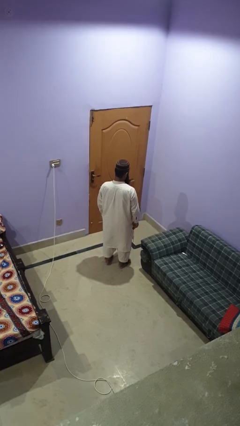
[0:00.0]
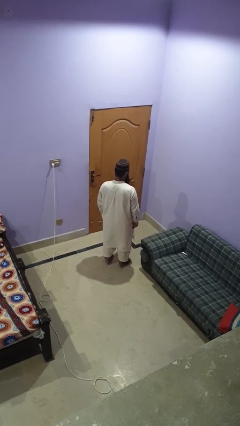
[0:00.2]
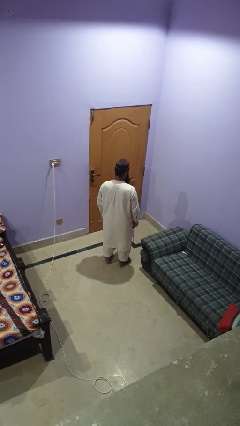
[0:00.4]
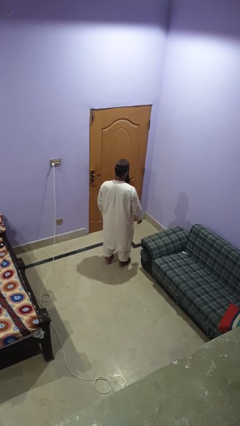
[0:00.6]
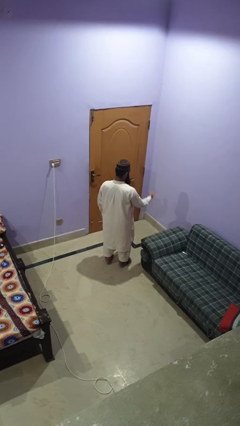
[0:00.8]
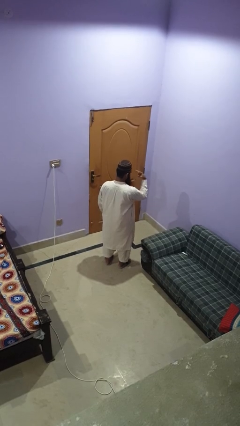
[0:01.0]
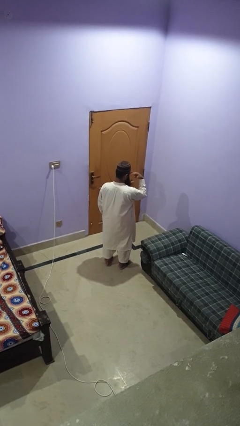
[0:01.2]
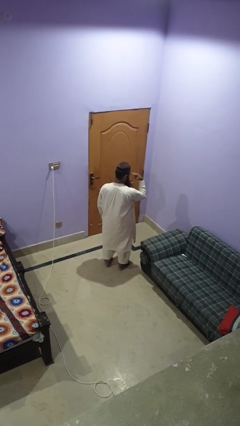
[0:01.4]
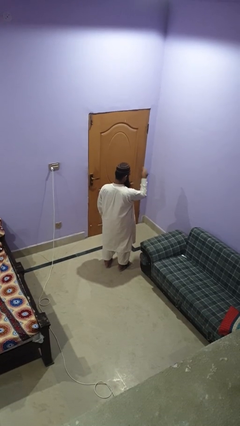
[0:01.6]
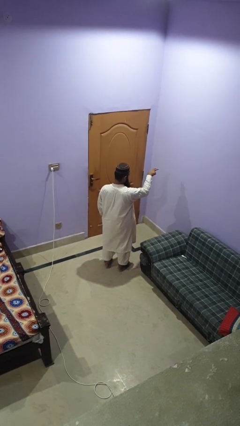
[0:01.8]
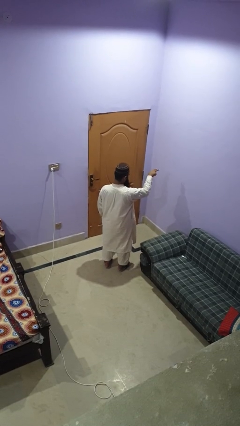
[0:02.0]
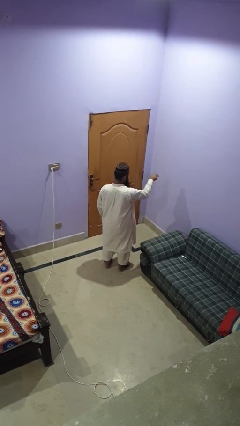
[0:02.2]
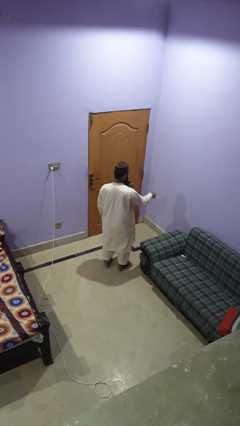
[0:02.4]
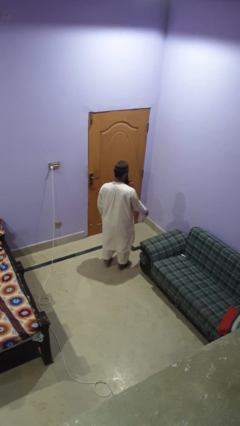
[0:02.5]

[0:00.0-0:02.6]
person gestures watch closely

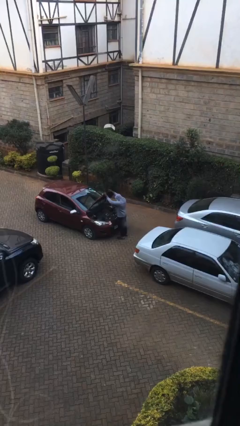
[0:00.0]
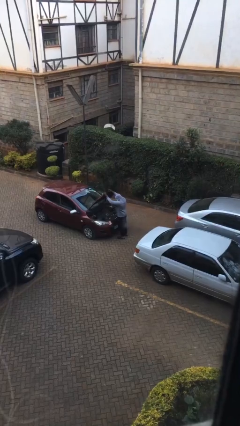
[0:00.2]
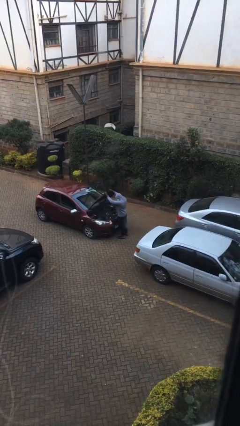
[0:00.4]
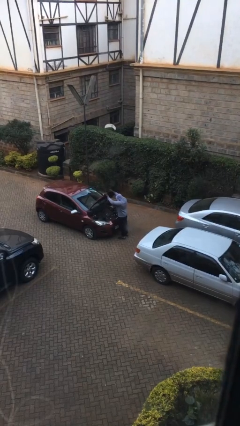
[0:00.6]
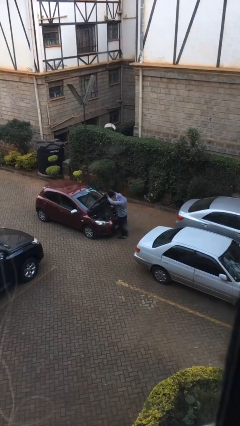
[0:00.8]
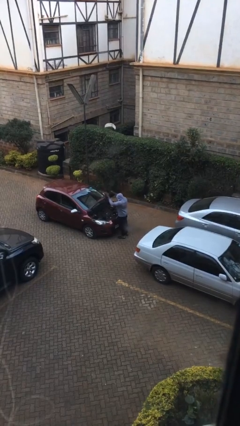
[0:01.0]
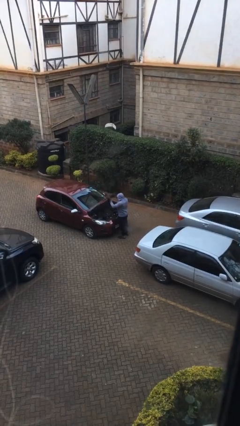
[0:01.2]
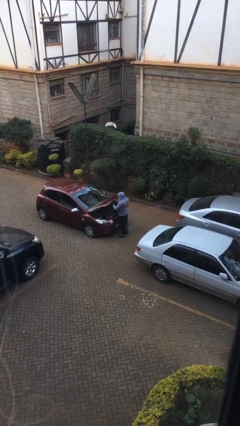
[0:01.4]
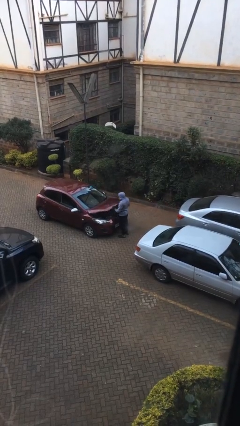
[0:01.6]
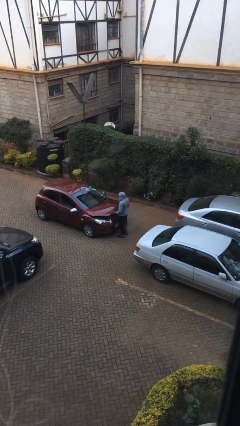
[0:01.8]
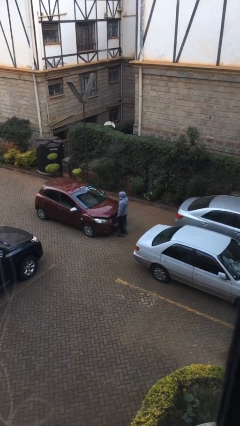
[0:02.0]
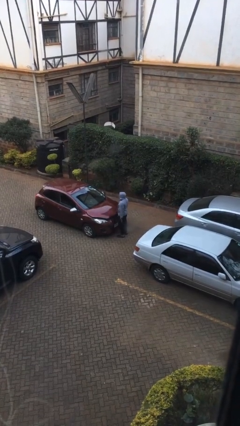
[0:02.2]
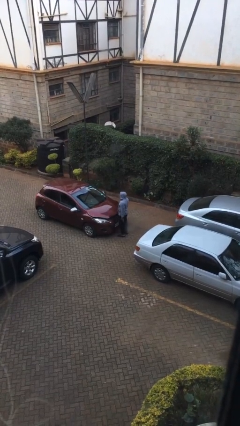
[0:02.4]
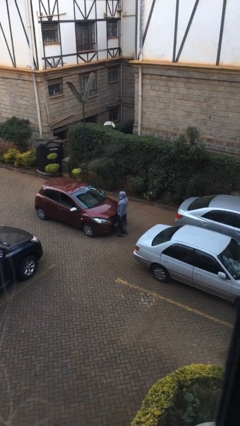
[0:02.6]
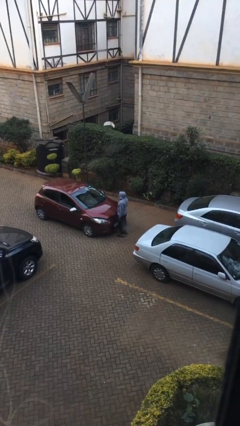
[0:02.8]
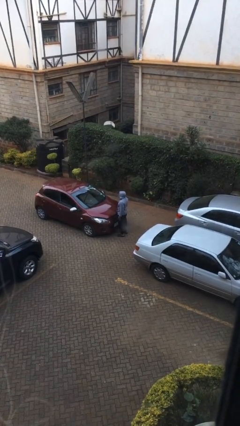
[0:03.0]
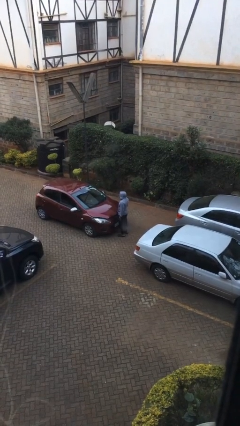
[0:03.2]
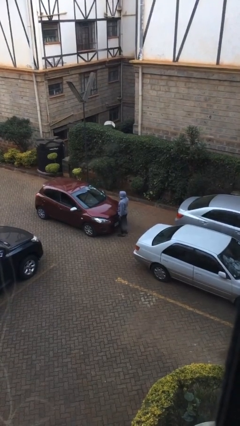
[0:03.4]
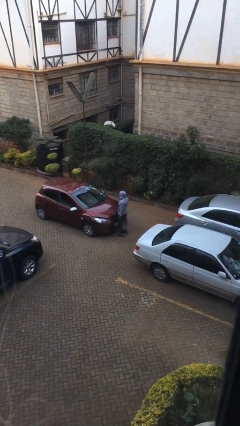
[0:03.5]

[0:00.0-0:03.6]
person closes car hood

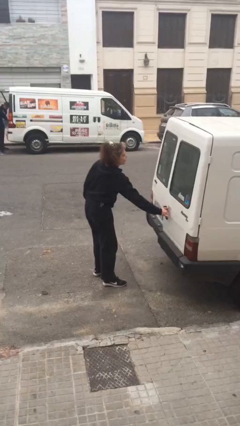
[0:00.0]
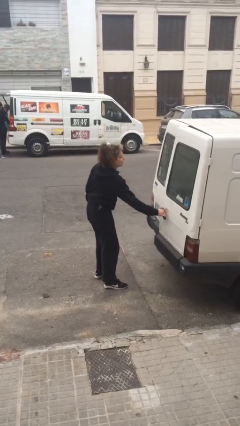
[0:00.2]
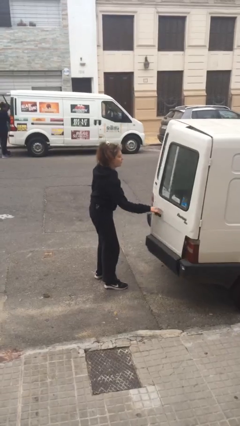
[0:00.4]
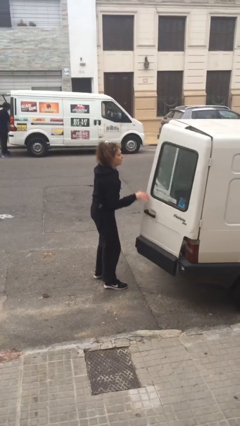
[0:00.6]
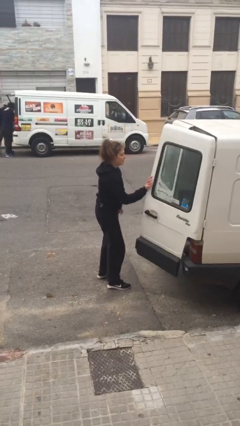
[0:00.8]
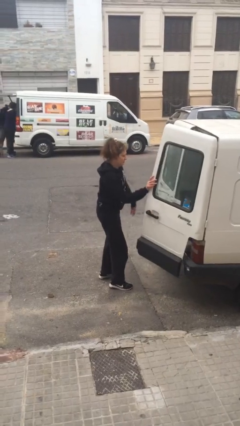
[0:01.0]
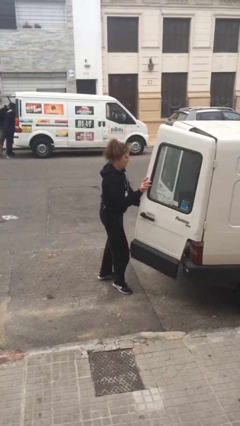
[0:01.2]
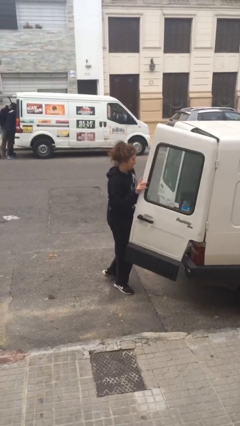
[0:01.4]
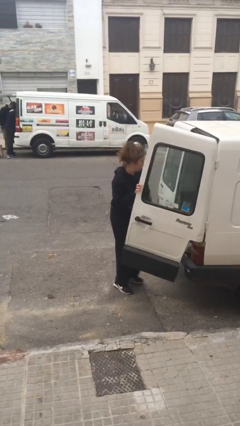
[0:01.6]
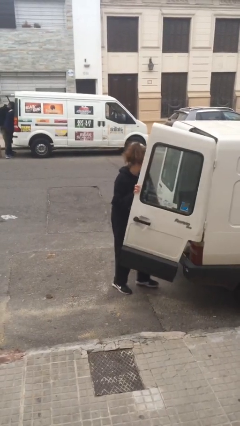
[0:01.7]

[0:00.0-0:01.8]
person opens car door

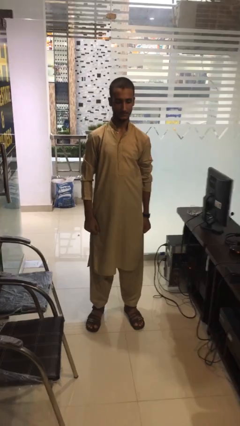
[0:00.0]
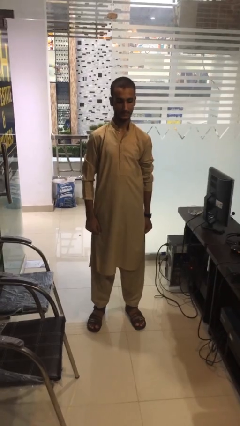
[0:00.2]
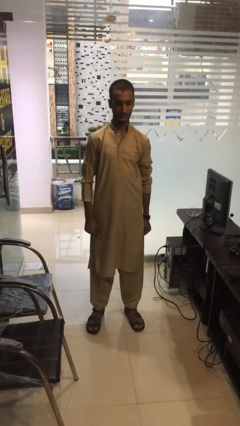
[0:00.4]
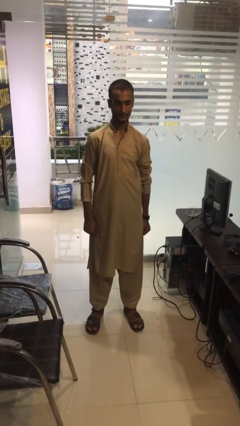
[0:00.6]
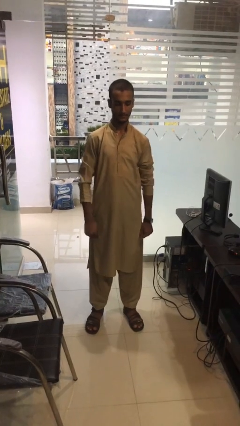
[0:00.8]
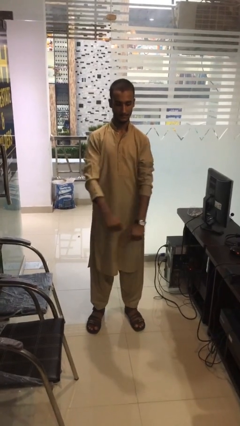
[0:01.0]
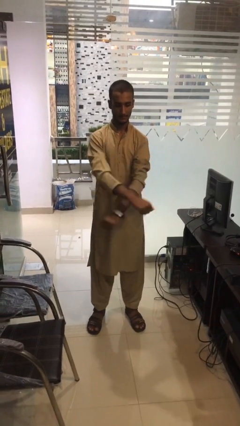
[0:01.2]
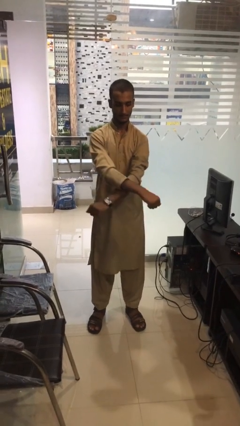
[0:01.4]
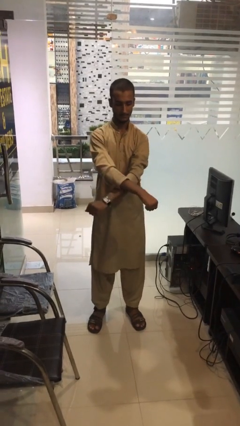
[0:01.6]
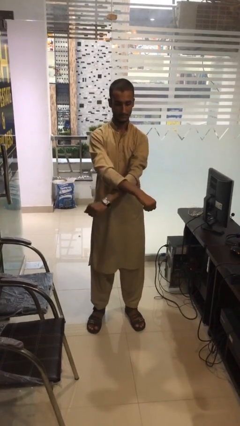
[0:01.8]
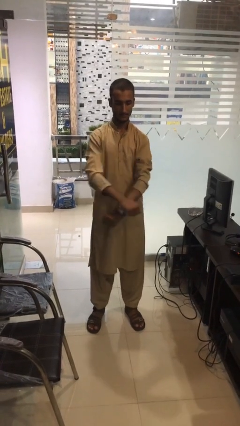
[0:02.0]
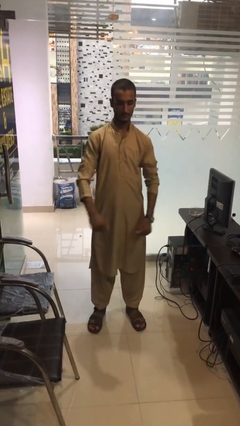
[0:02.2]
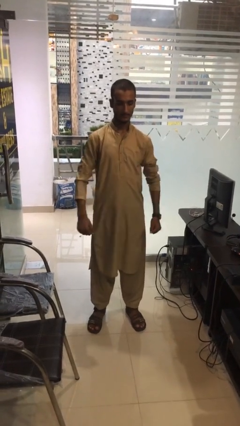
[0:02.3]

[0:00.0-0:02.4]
person gestures arms x

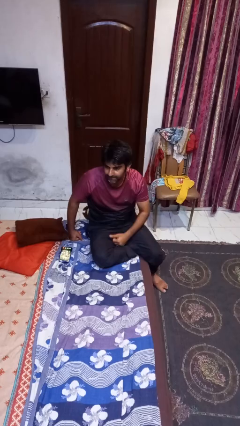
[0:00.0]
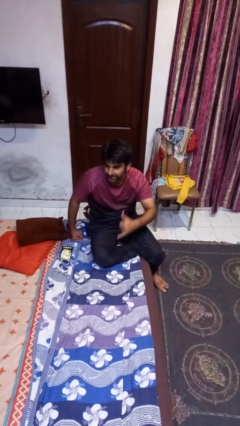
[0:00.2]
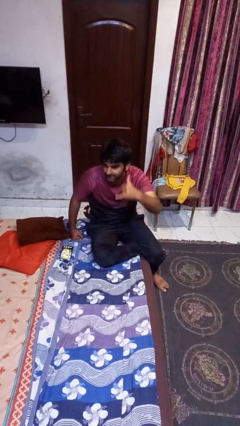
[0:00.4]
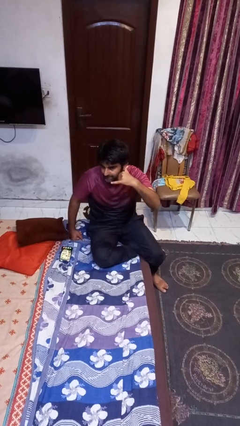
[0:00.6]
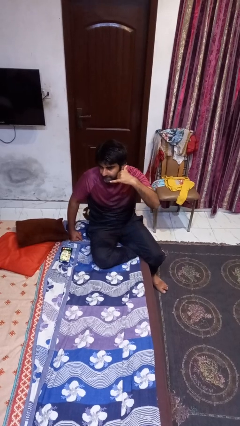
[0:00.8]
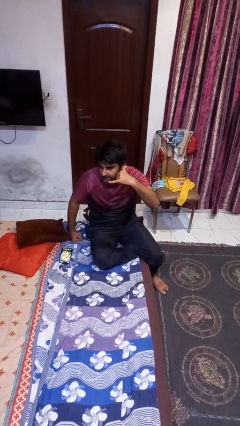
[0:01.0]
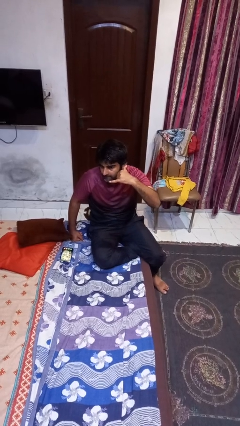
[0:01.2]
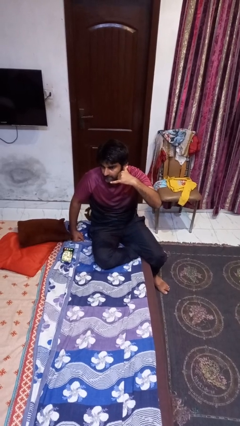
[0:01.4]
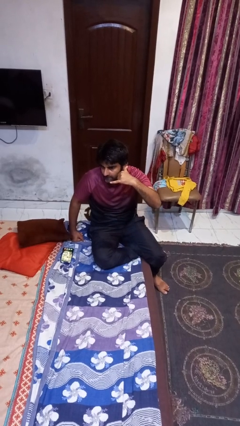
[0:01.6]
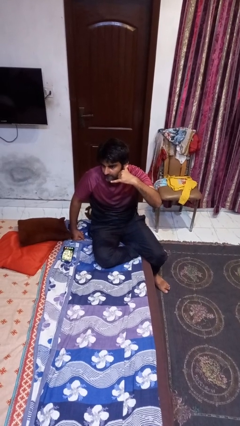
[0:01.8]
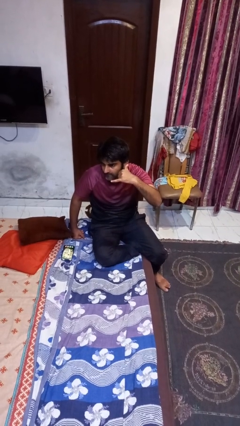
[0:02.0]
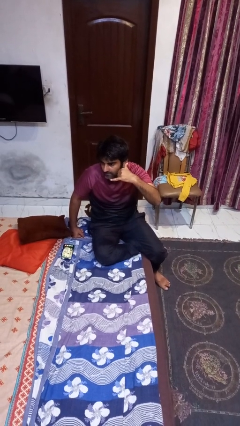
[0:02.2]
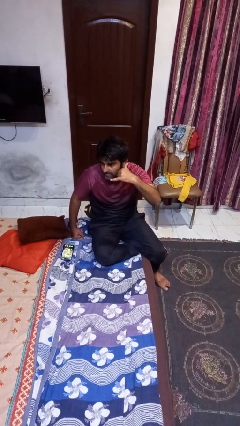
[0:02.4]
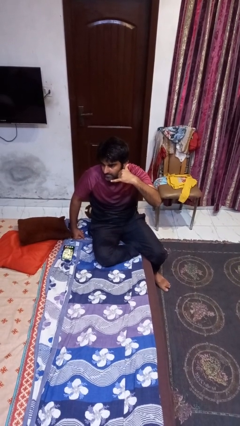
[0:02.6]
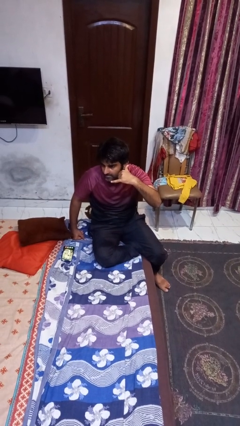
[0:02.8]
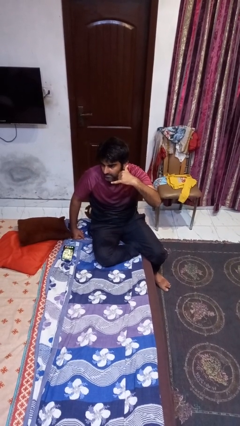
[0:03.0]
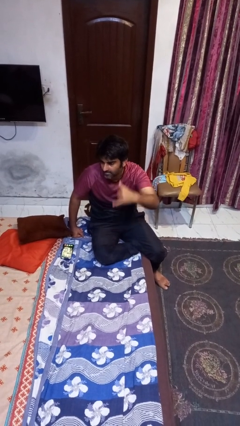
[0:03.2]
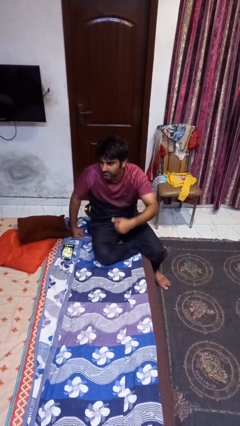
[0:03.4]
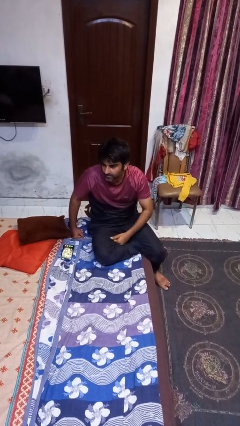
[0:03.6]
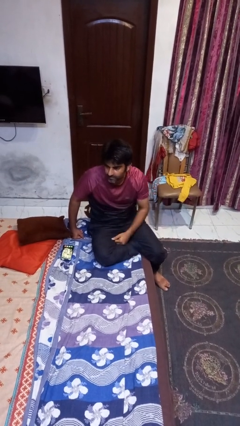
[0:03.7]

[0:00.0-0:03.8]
person gestures call me

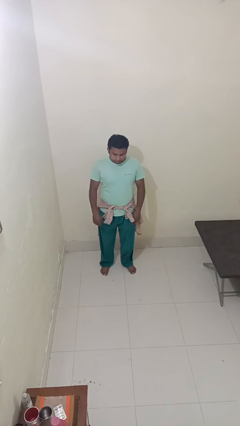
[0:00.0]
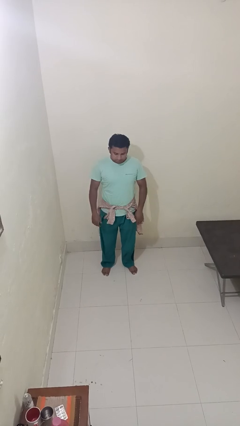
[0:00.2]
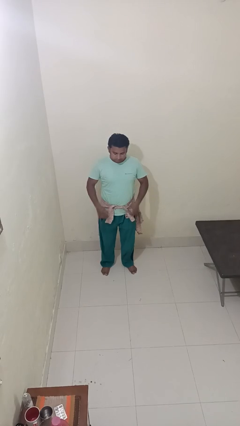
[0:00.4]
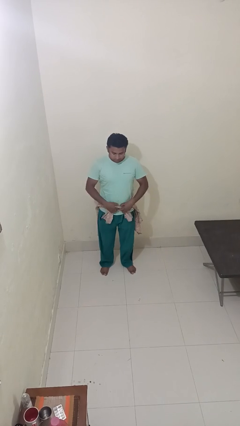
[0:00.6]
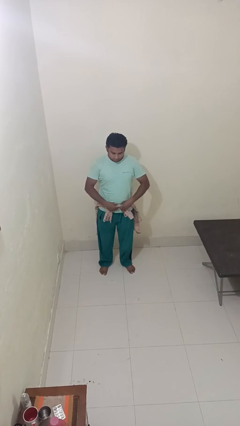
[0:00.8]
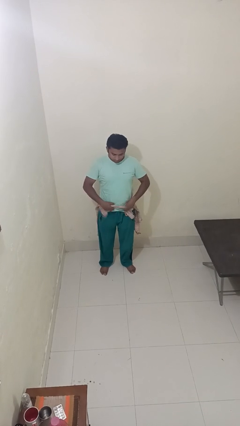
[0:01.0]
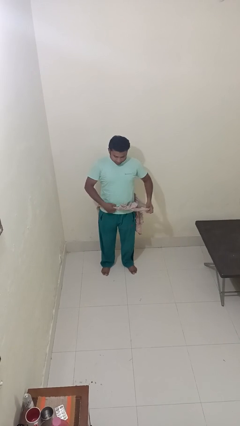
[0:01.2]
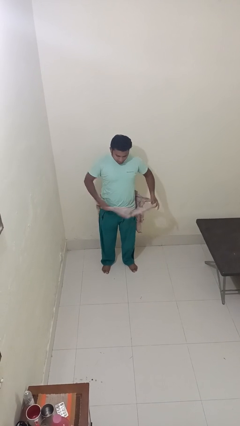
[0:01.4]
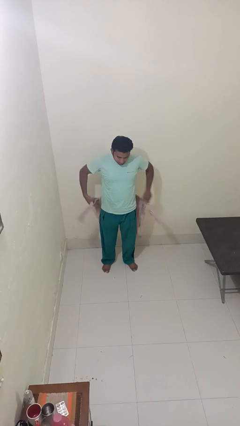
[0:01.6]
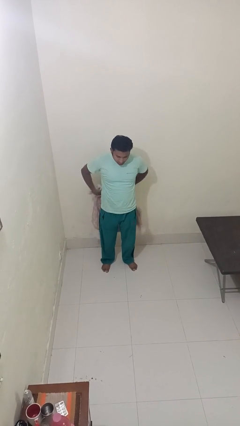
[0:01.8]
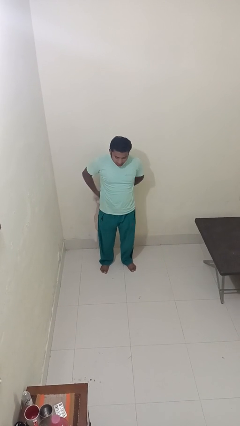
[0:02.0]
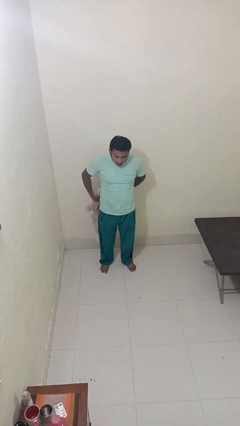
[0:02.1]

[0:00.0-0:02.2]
person unties jacket around waist

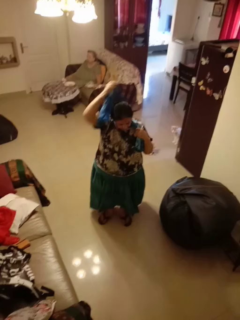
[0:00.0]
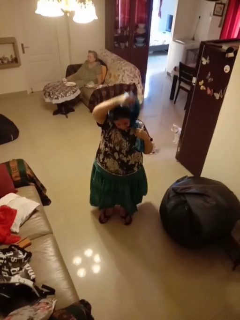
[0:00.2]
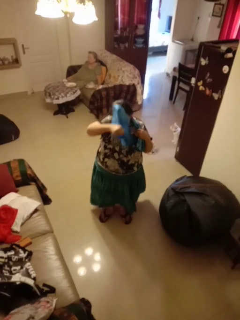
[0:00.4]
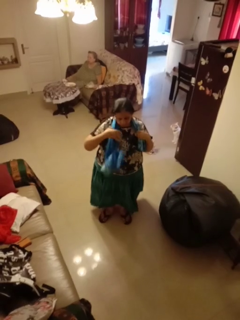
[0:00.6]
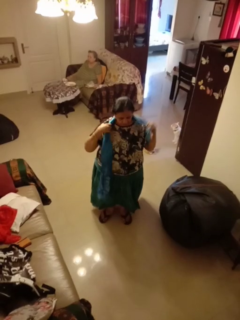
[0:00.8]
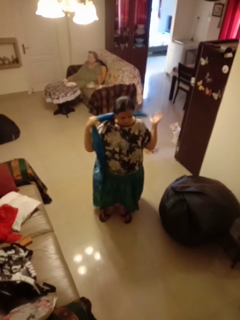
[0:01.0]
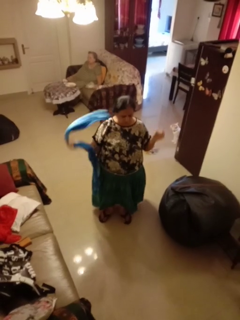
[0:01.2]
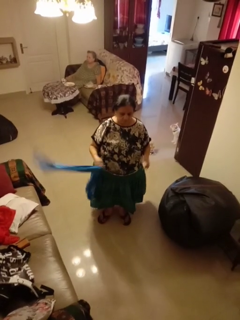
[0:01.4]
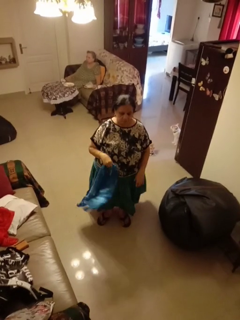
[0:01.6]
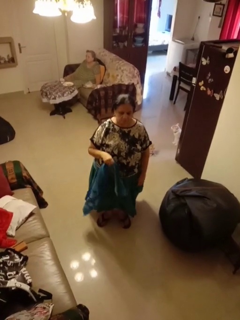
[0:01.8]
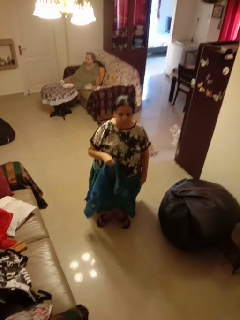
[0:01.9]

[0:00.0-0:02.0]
person takes off scarf
